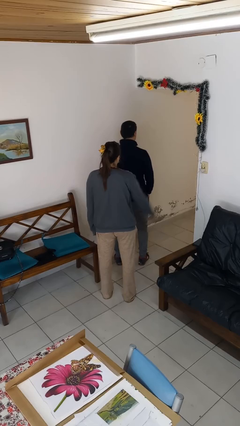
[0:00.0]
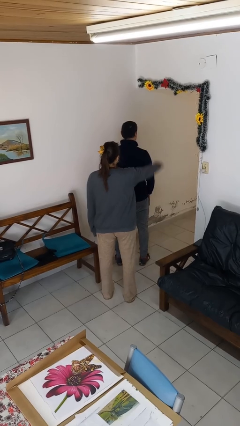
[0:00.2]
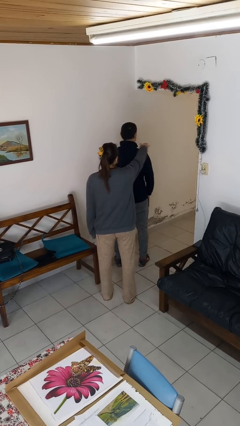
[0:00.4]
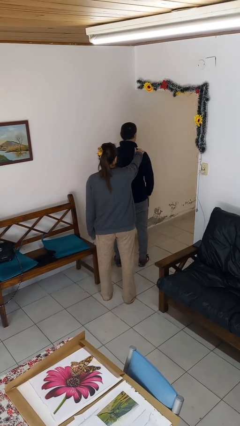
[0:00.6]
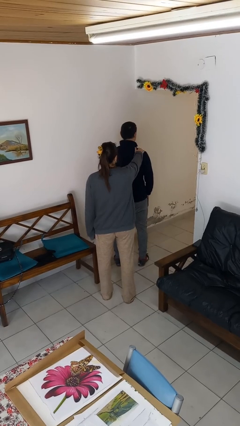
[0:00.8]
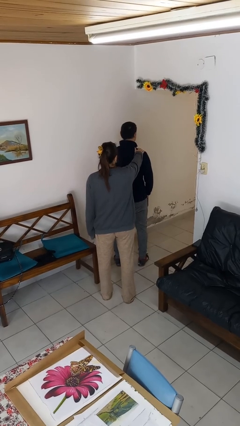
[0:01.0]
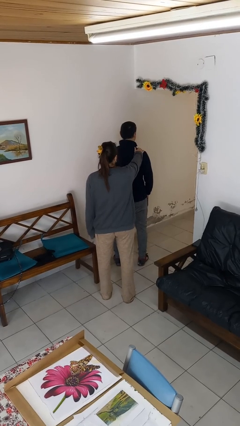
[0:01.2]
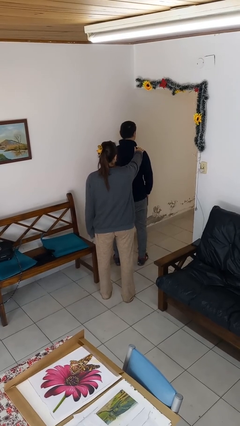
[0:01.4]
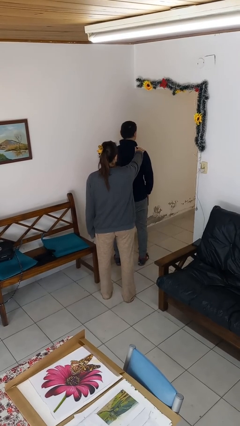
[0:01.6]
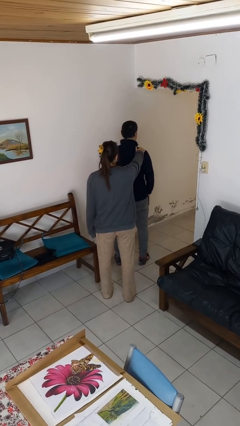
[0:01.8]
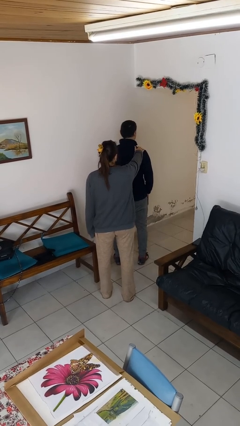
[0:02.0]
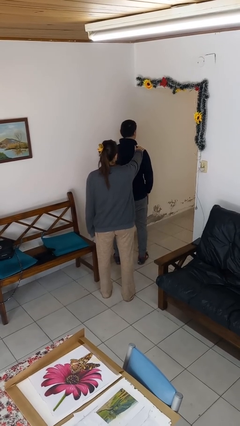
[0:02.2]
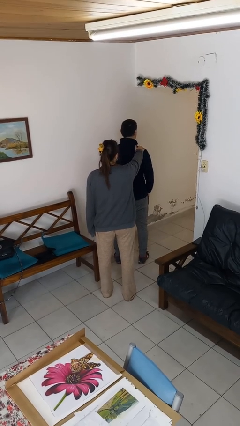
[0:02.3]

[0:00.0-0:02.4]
person touches back of person

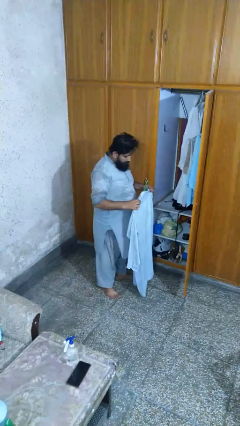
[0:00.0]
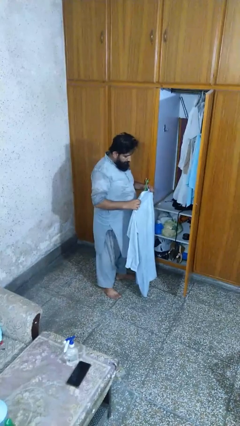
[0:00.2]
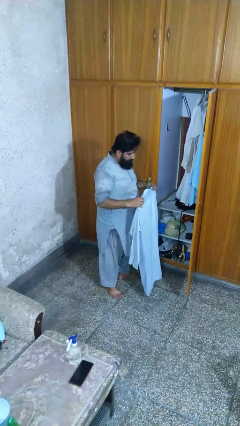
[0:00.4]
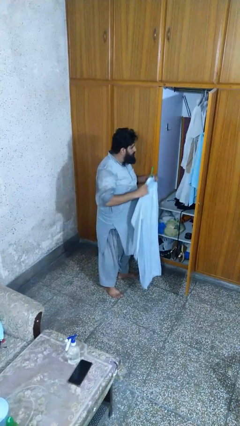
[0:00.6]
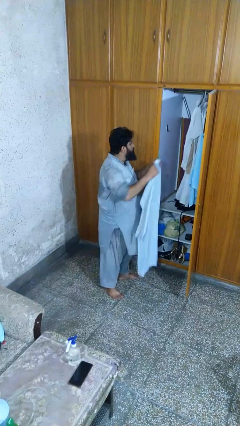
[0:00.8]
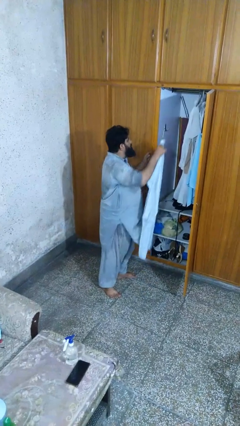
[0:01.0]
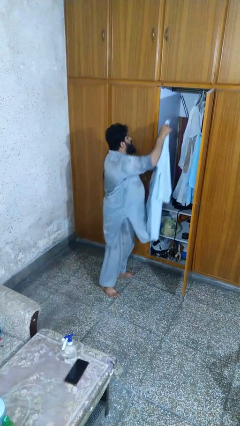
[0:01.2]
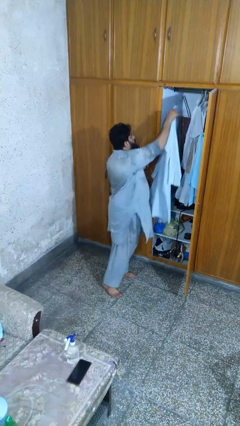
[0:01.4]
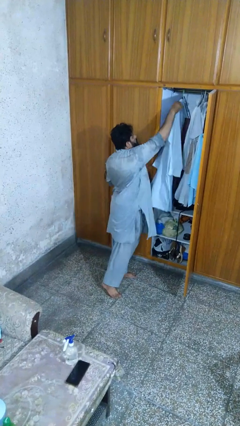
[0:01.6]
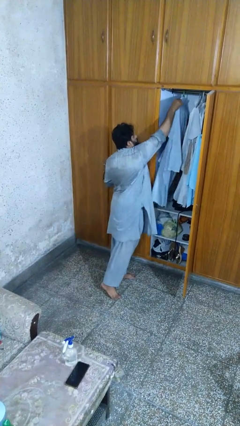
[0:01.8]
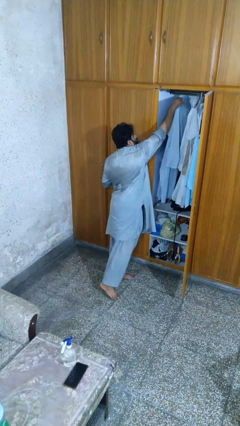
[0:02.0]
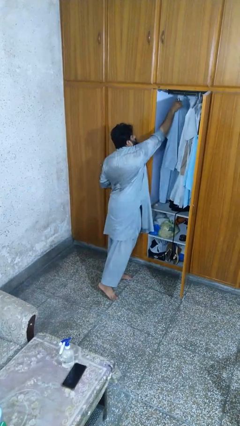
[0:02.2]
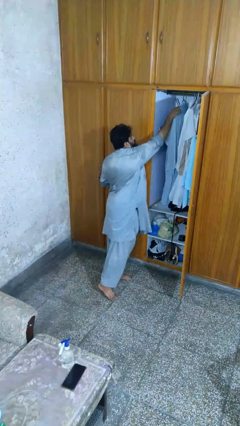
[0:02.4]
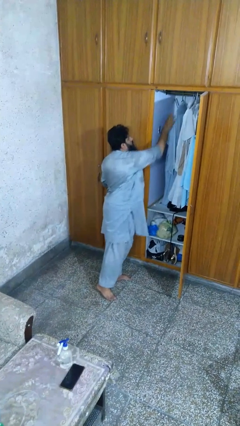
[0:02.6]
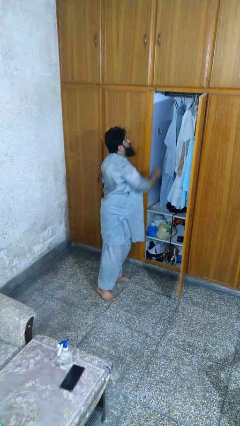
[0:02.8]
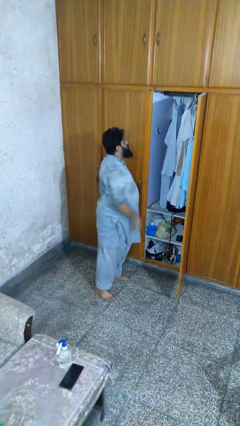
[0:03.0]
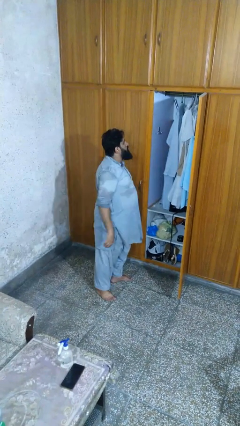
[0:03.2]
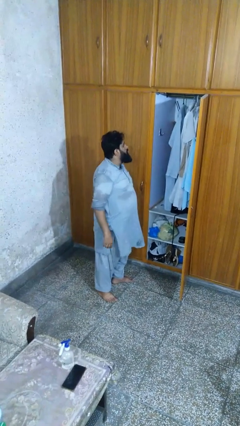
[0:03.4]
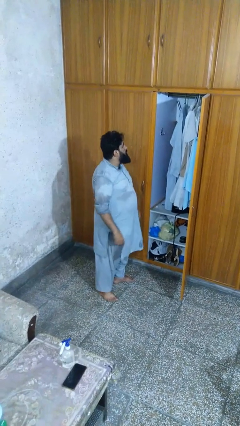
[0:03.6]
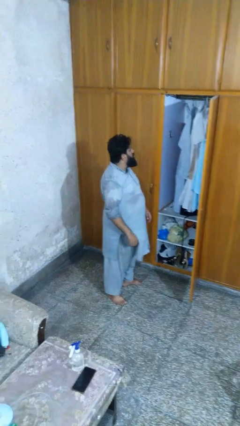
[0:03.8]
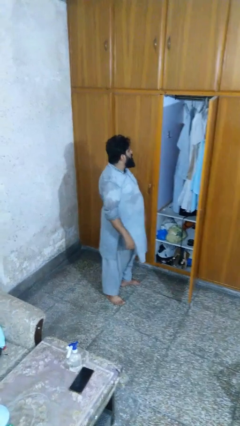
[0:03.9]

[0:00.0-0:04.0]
person puts clothes into closet

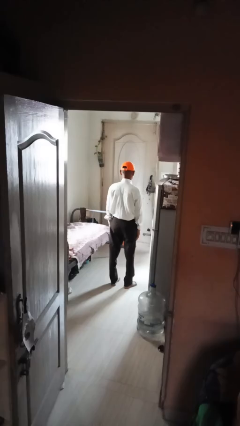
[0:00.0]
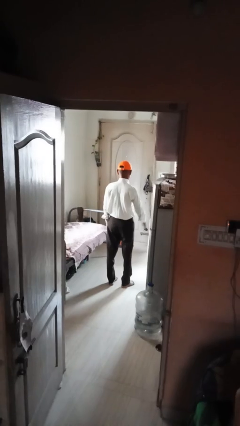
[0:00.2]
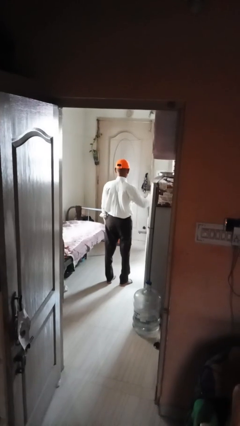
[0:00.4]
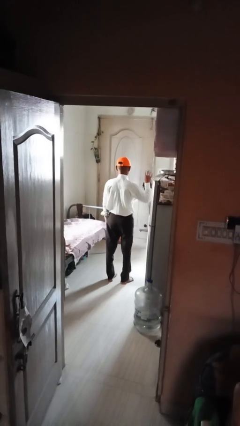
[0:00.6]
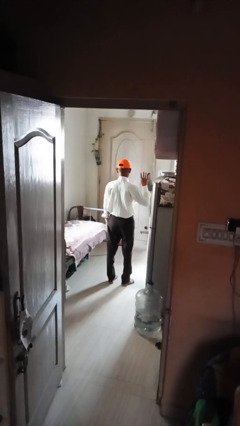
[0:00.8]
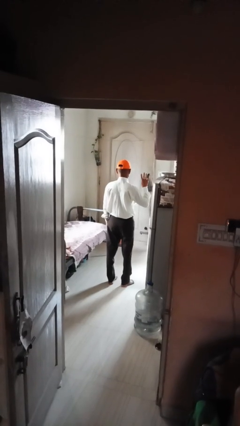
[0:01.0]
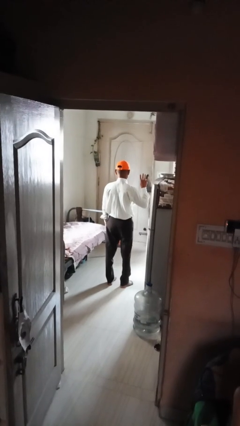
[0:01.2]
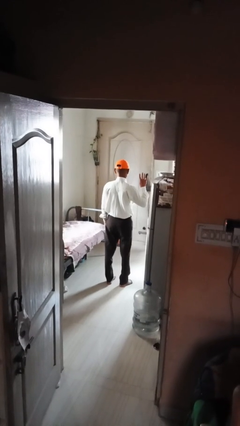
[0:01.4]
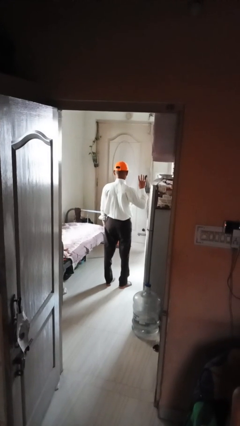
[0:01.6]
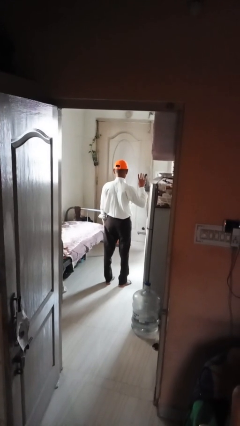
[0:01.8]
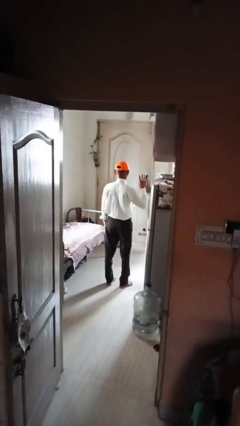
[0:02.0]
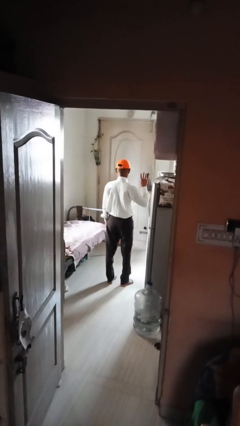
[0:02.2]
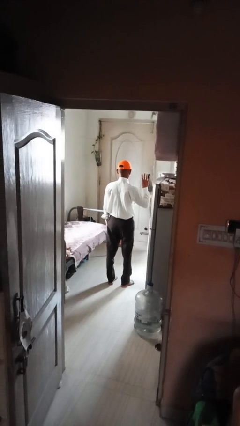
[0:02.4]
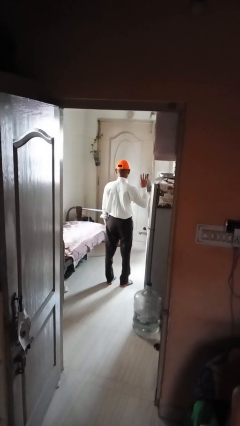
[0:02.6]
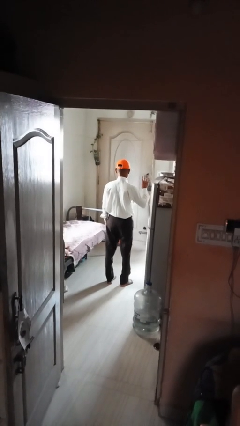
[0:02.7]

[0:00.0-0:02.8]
person gestures number four

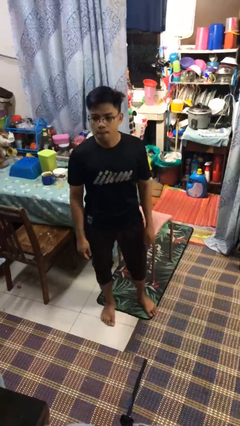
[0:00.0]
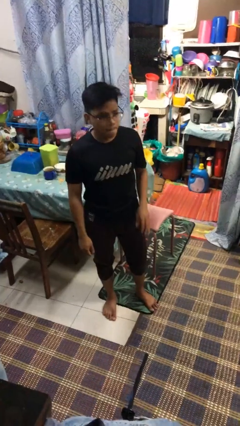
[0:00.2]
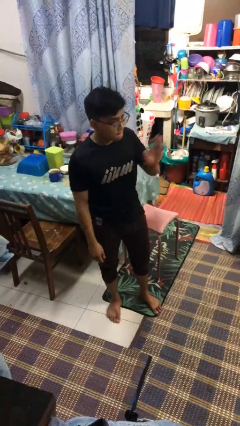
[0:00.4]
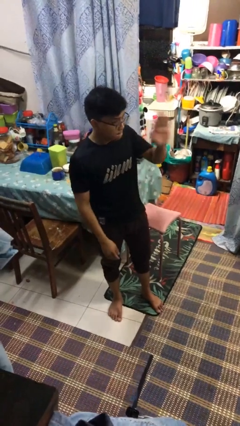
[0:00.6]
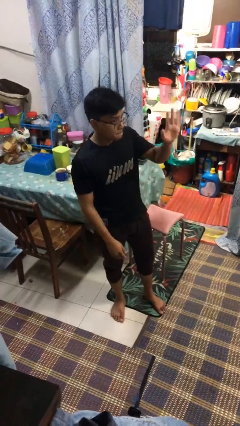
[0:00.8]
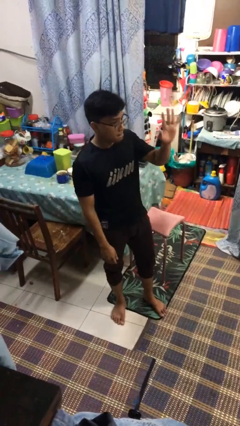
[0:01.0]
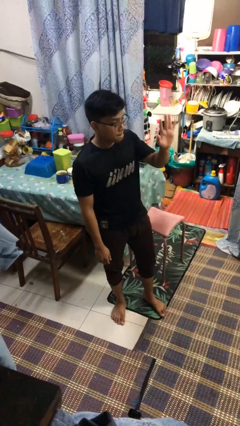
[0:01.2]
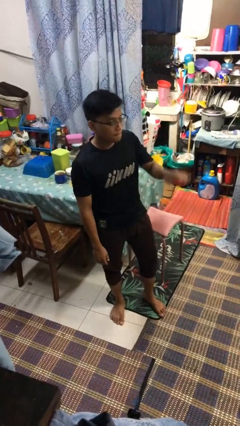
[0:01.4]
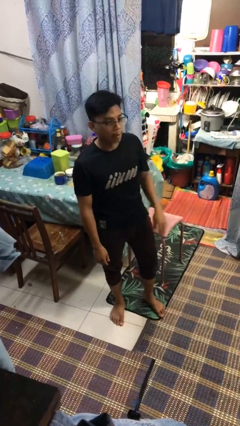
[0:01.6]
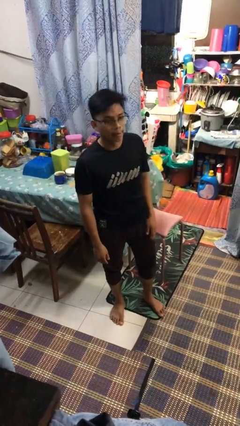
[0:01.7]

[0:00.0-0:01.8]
person gestures stop

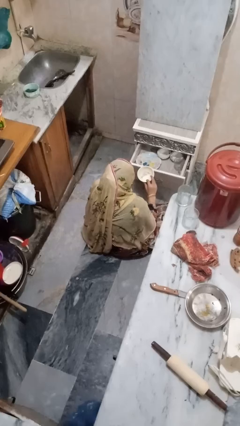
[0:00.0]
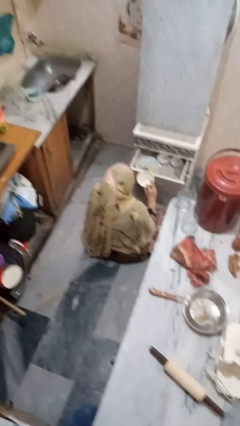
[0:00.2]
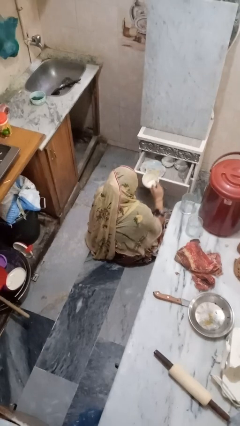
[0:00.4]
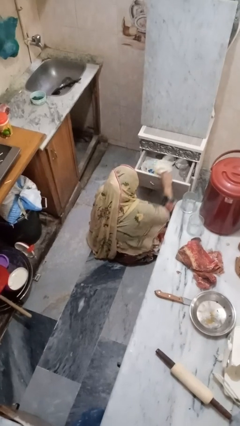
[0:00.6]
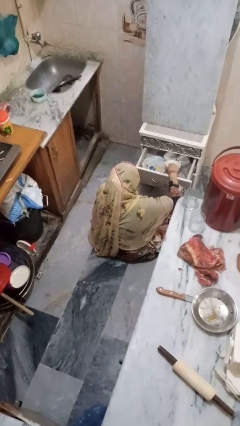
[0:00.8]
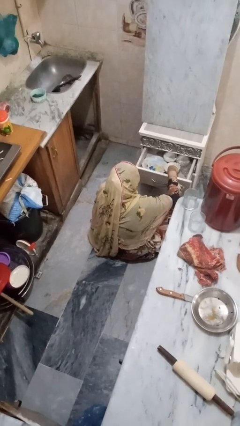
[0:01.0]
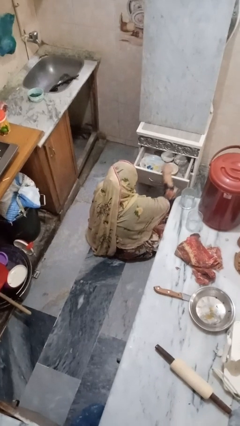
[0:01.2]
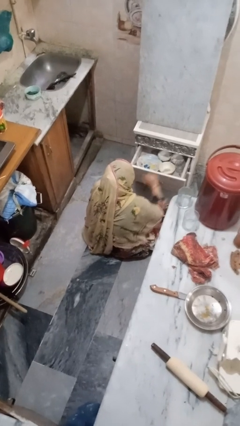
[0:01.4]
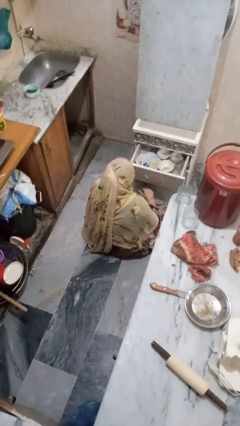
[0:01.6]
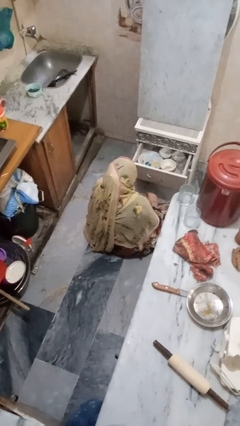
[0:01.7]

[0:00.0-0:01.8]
person puts object into kitchen drawer

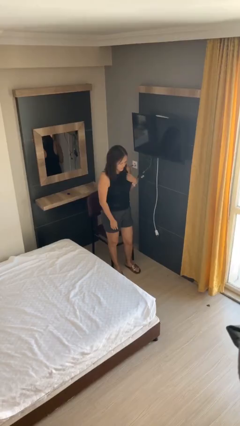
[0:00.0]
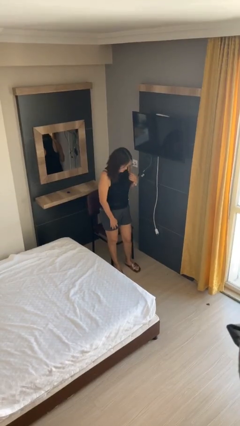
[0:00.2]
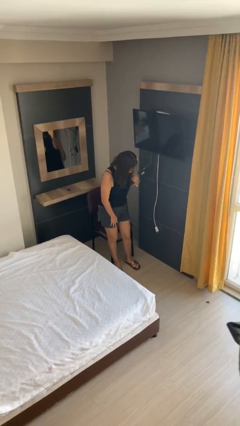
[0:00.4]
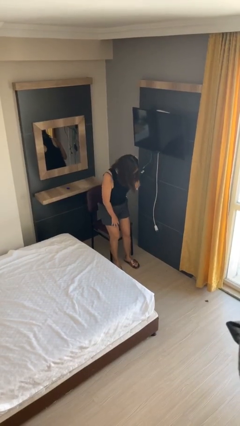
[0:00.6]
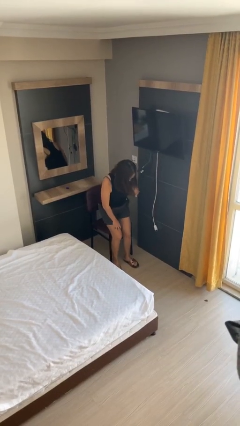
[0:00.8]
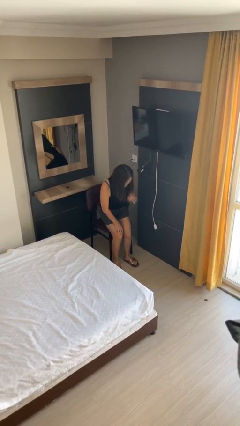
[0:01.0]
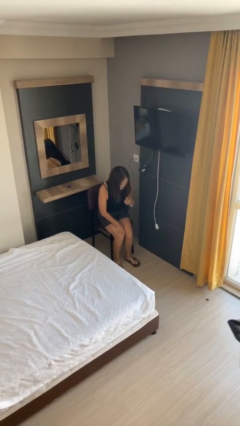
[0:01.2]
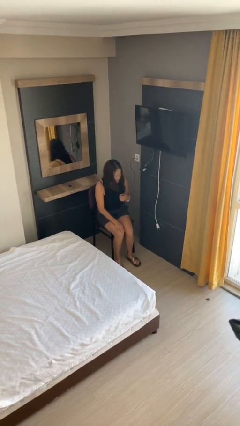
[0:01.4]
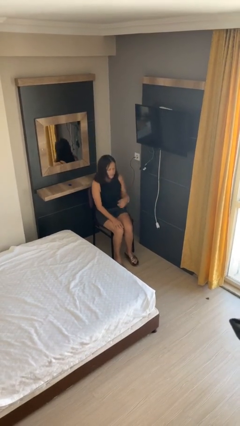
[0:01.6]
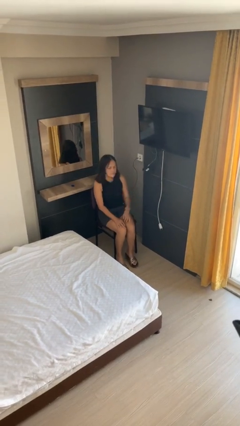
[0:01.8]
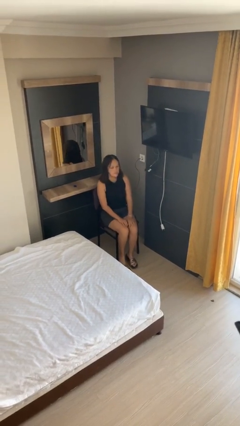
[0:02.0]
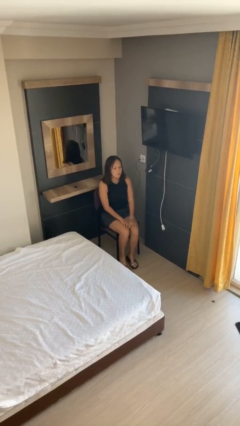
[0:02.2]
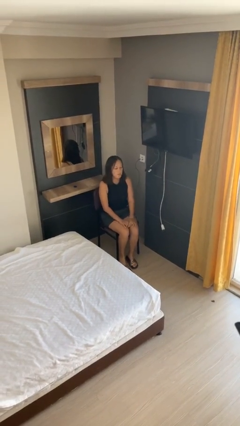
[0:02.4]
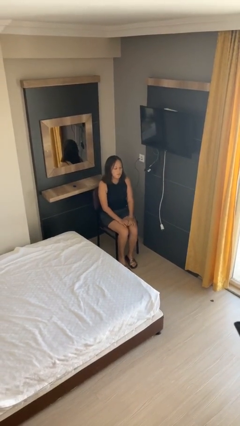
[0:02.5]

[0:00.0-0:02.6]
person sits down

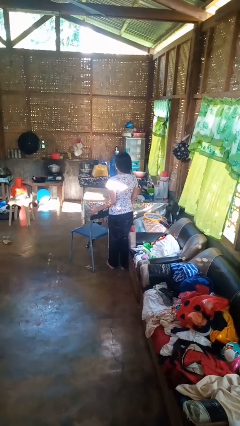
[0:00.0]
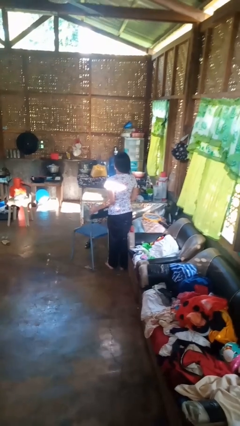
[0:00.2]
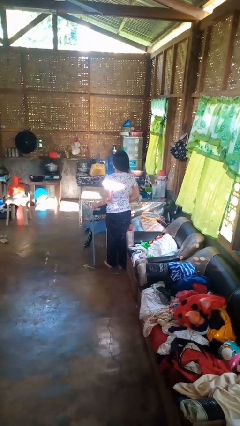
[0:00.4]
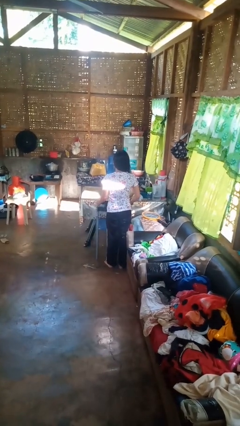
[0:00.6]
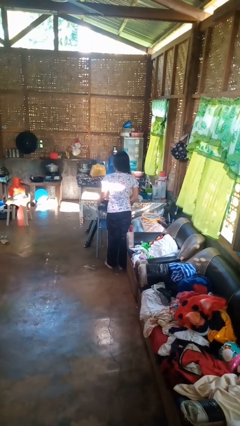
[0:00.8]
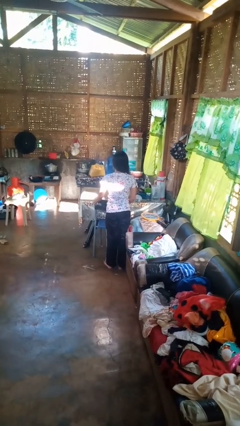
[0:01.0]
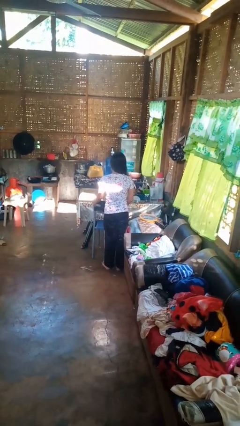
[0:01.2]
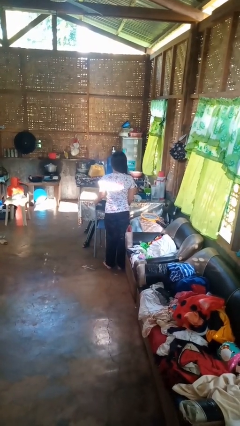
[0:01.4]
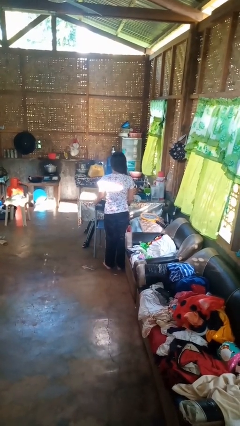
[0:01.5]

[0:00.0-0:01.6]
person pushes in chair
